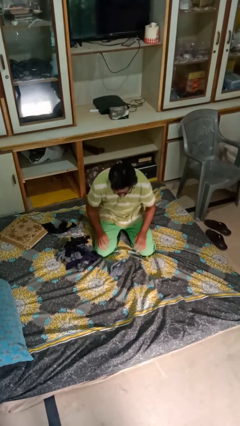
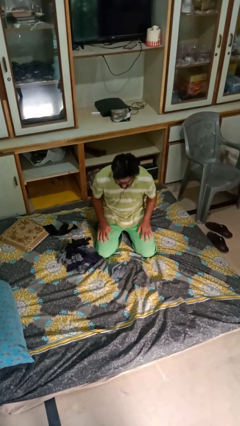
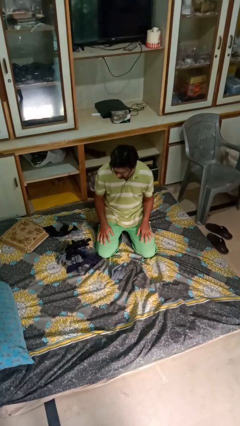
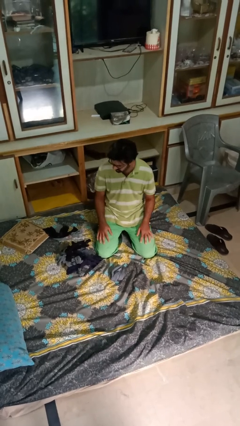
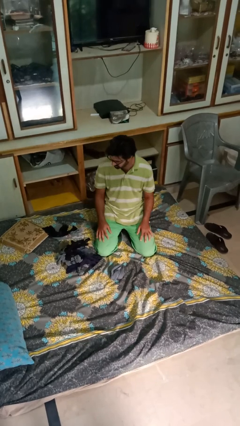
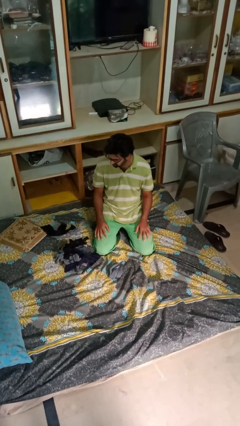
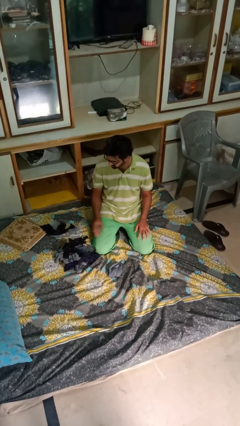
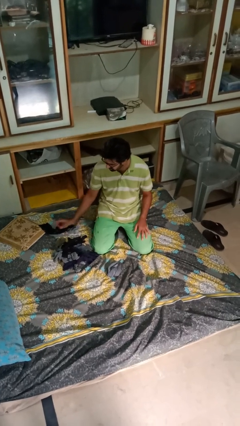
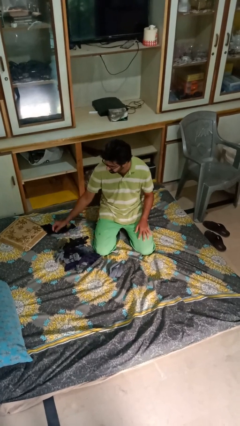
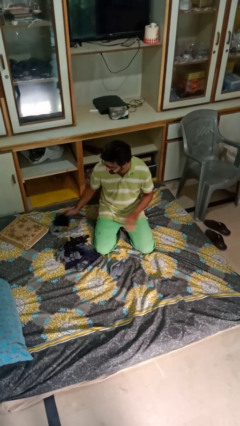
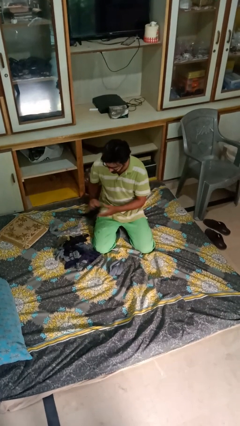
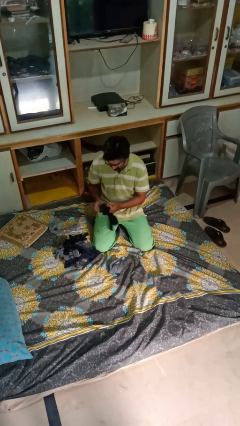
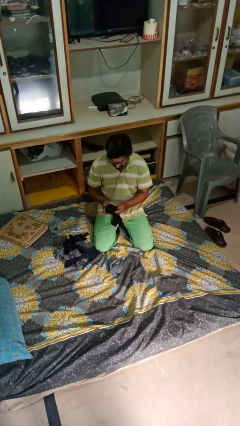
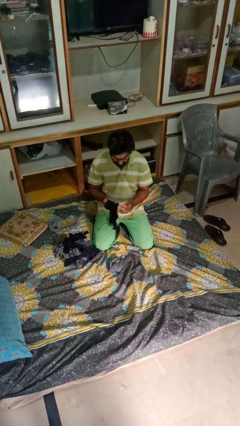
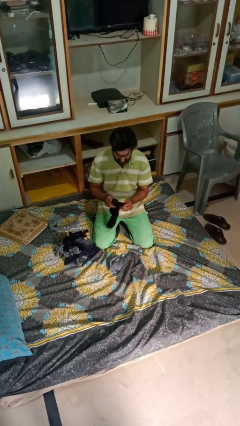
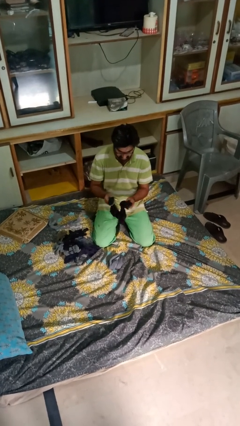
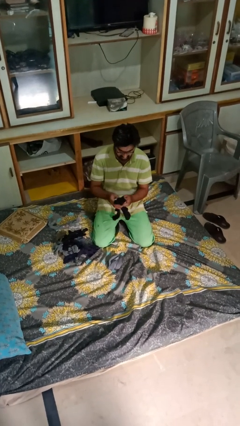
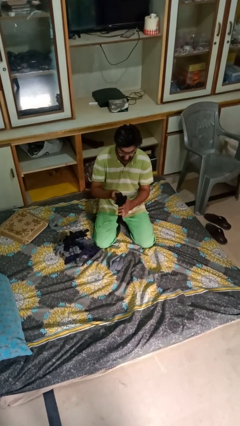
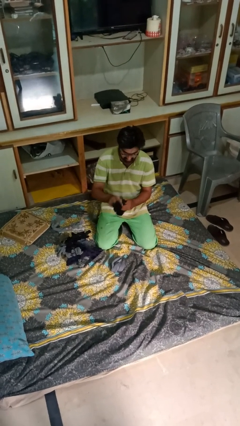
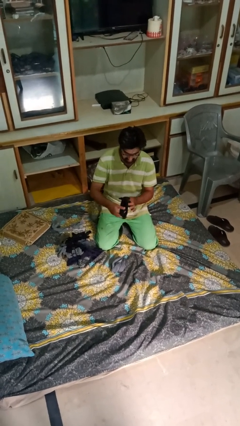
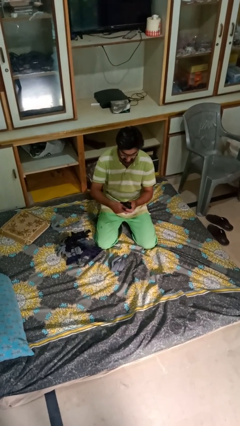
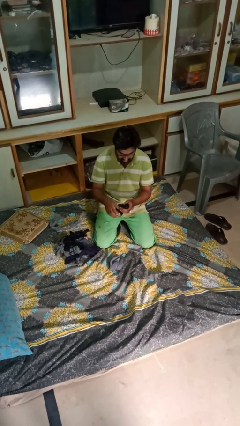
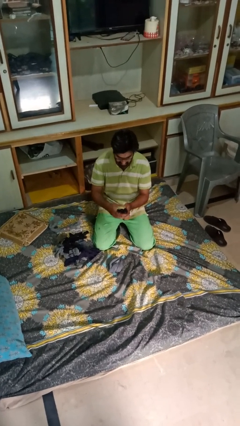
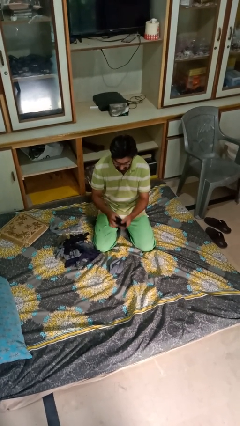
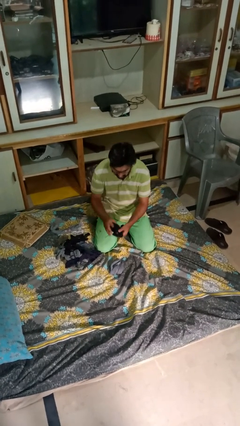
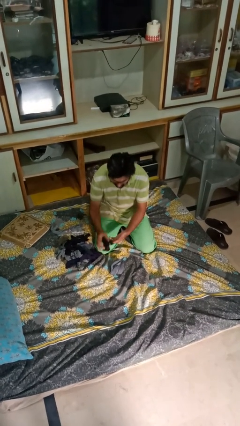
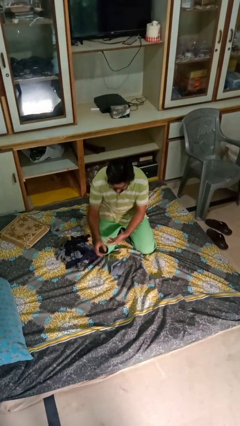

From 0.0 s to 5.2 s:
person folds socks

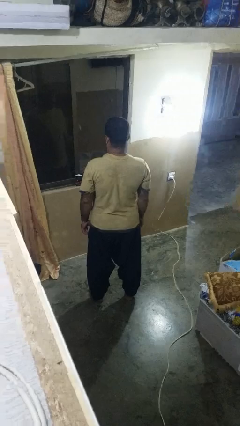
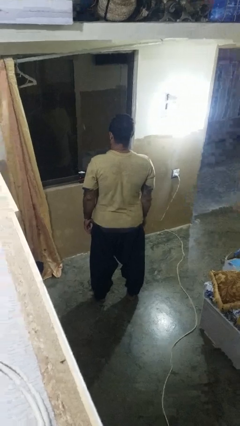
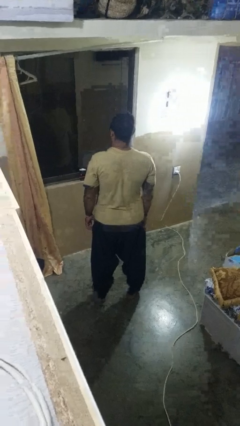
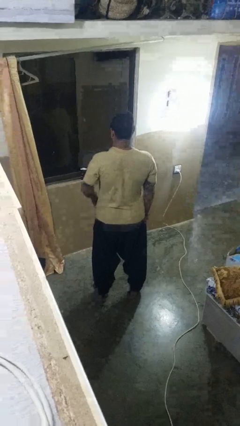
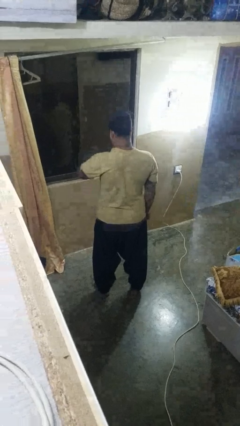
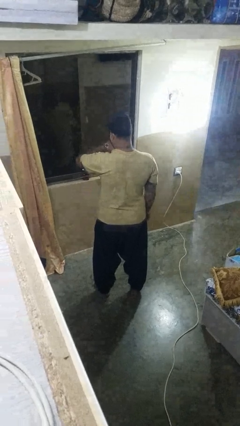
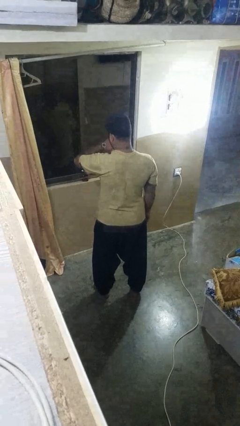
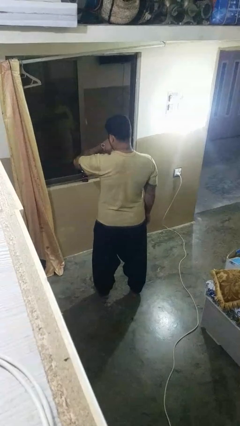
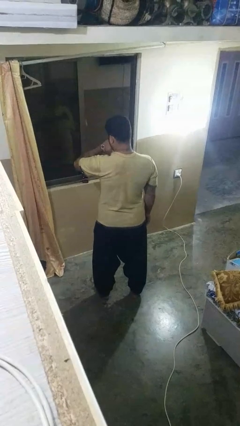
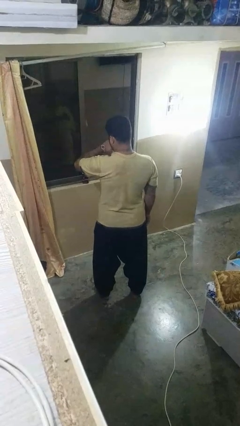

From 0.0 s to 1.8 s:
person looks at wristwatch

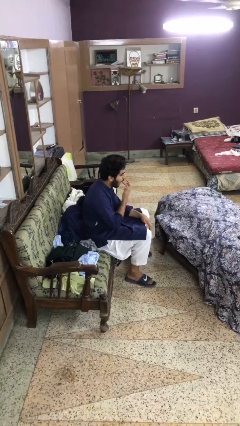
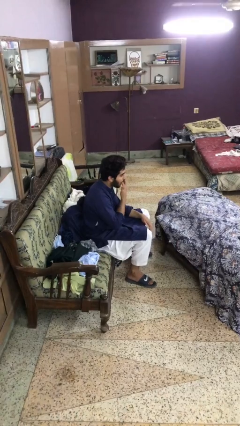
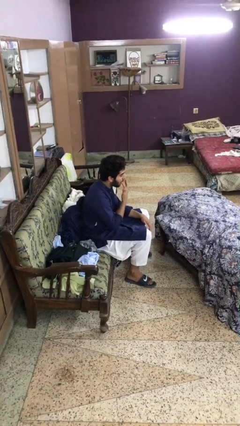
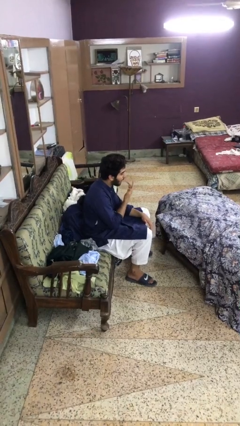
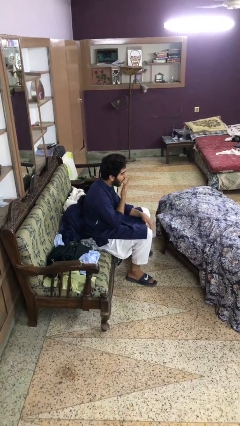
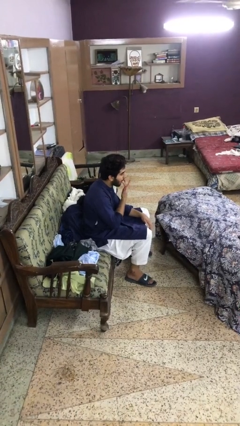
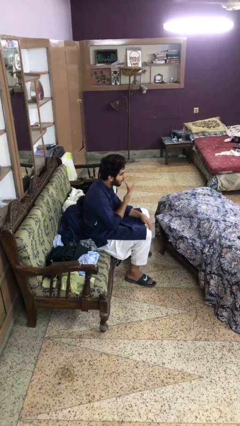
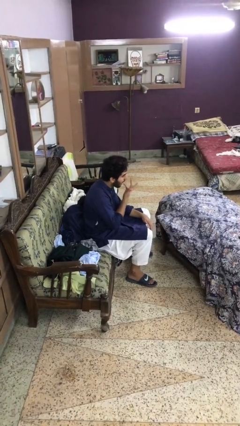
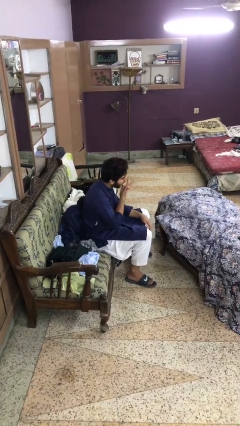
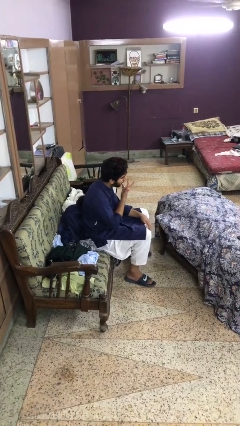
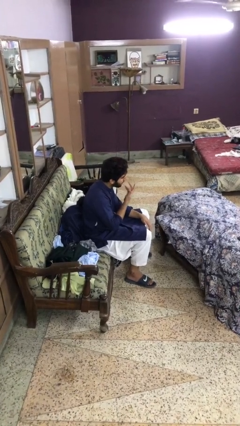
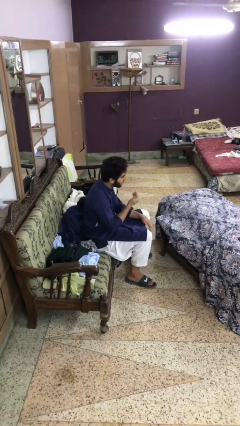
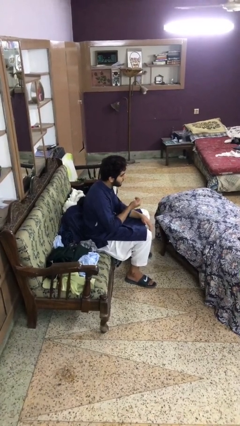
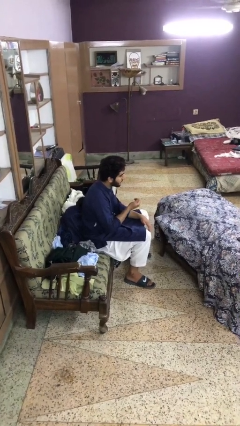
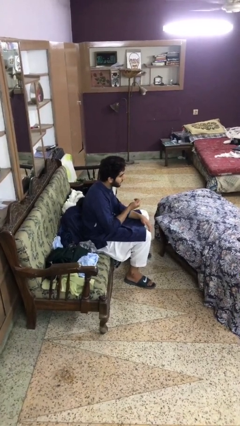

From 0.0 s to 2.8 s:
person licks fingers

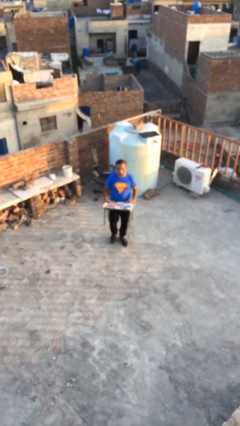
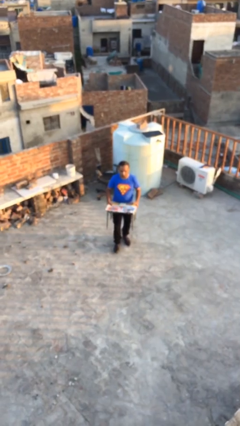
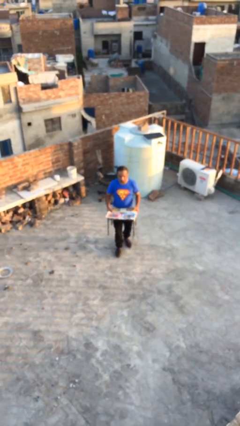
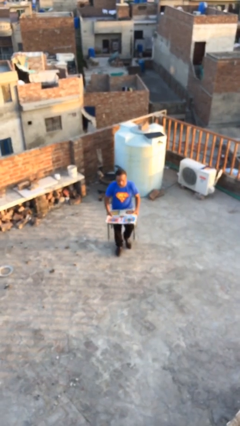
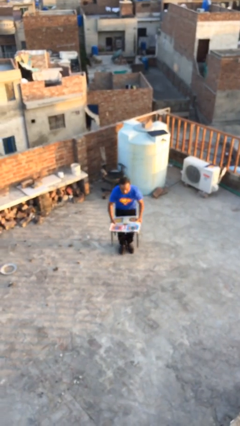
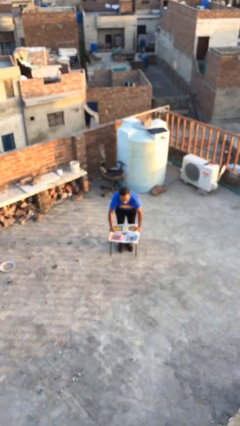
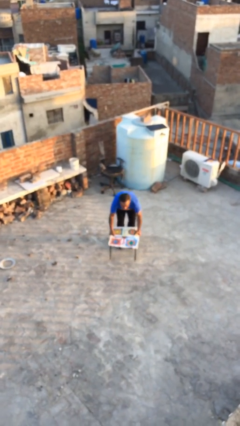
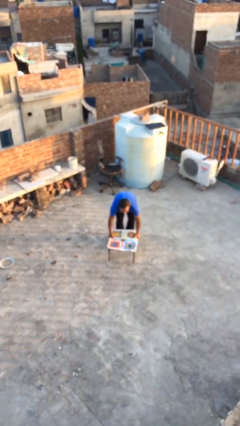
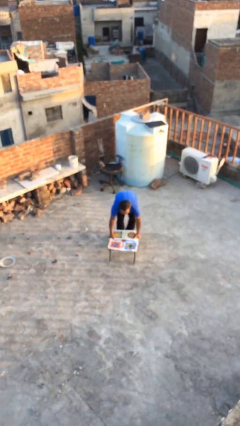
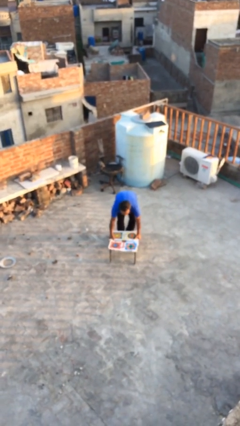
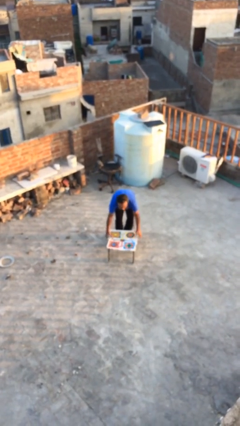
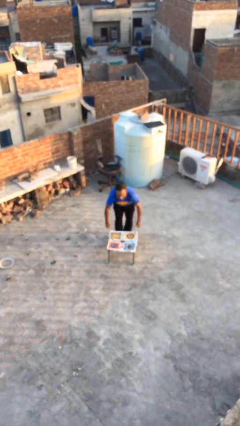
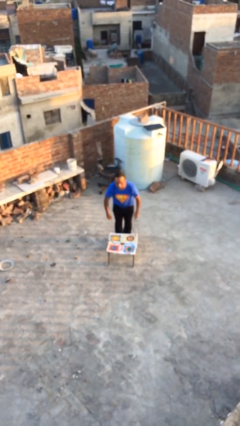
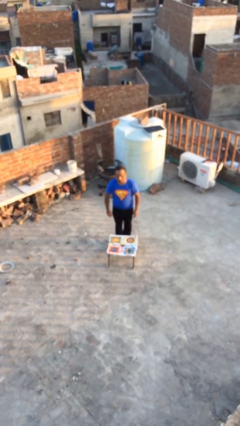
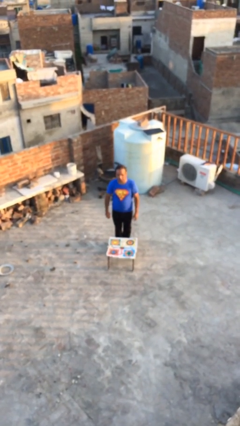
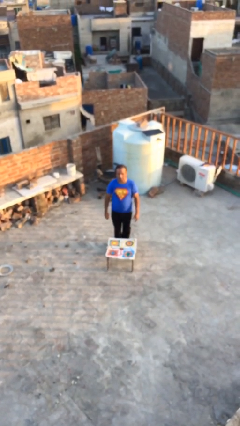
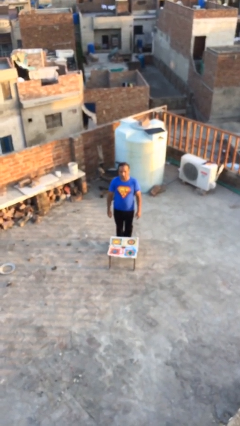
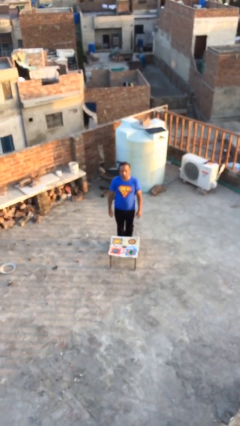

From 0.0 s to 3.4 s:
person puts down object on floor

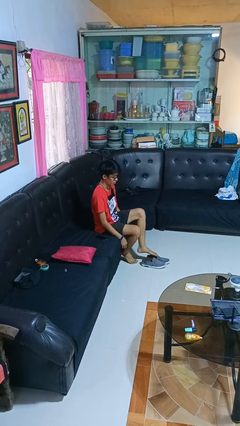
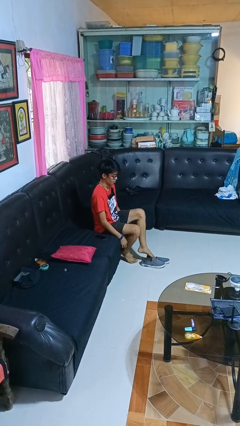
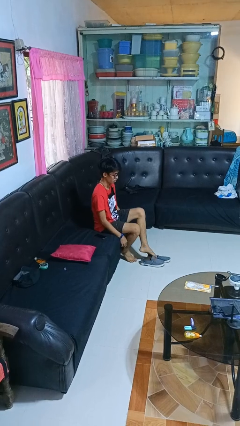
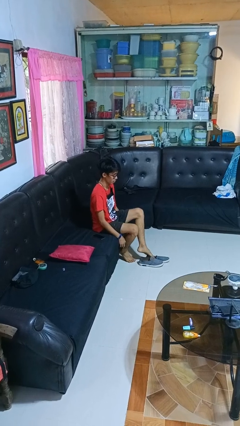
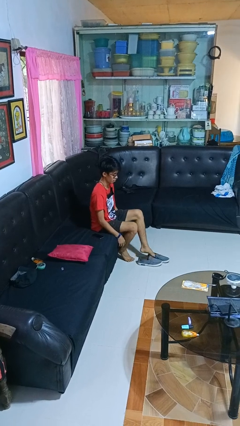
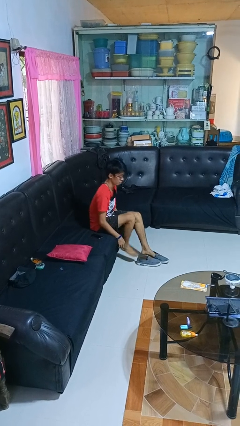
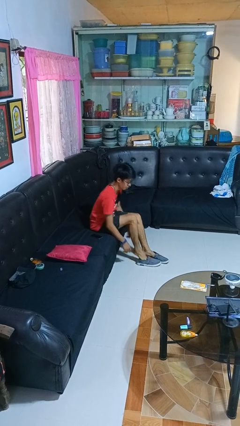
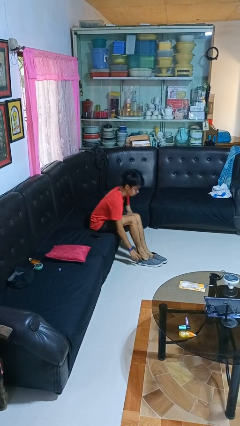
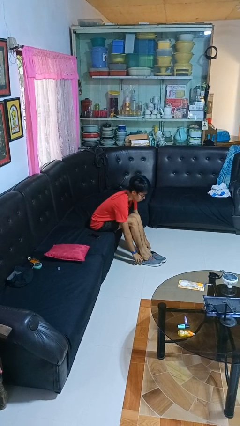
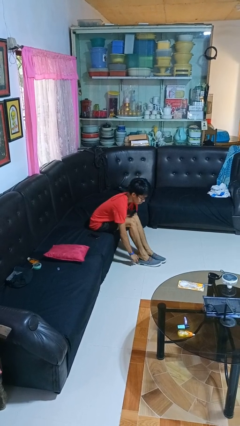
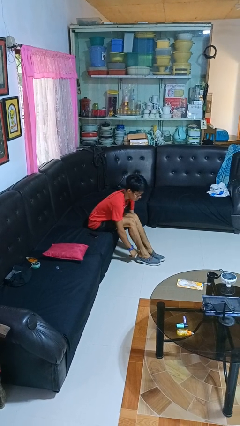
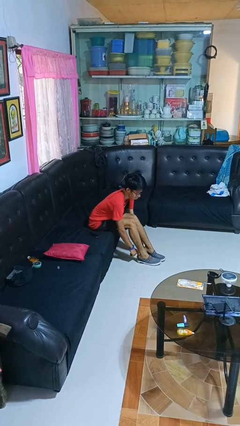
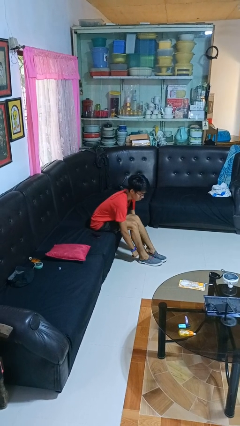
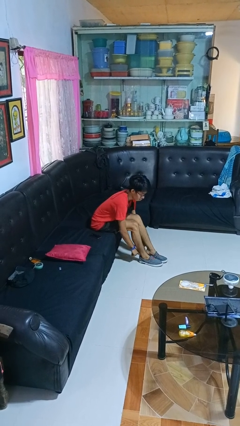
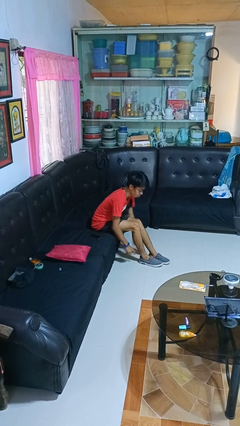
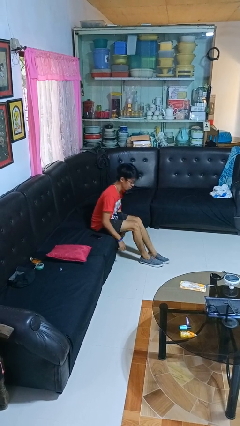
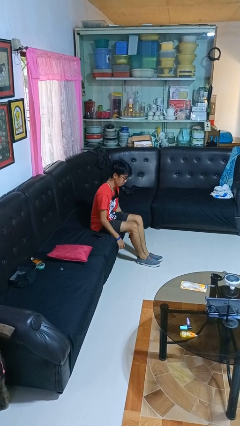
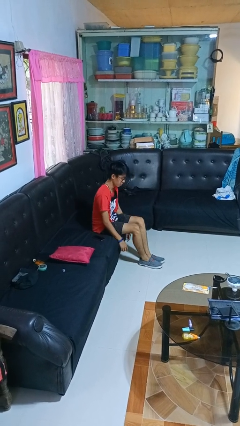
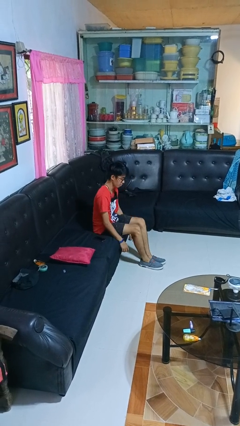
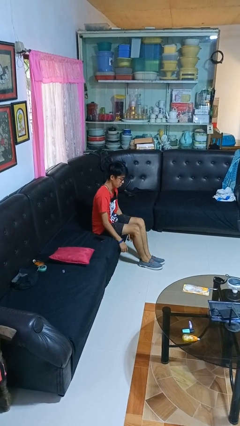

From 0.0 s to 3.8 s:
person puts on shoes

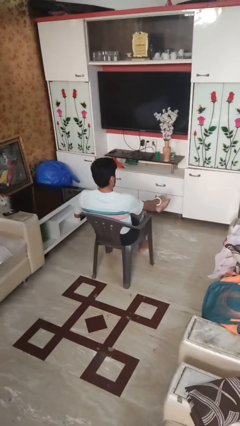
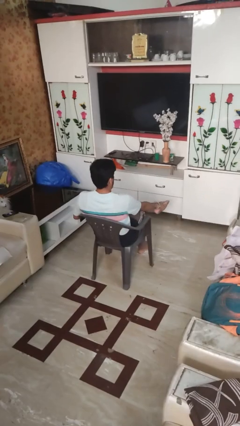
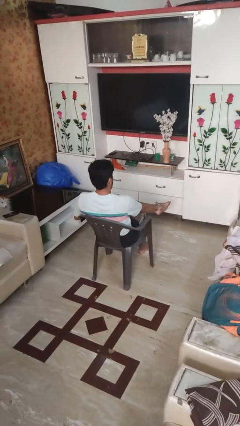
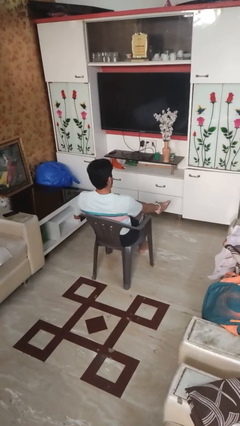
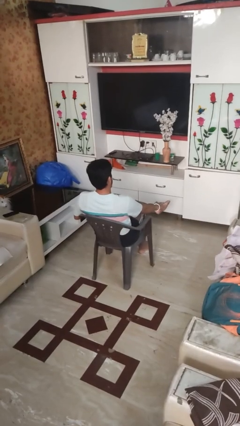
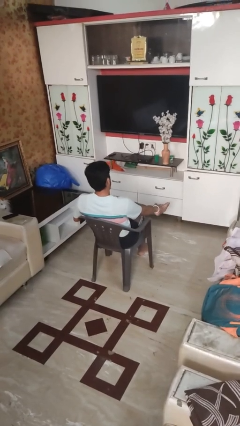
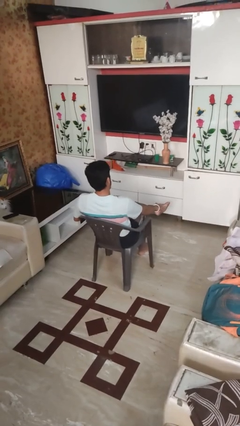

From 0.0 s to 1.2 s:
person swats bug
